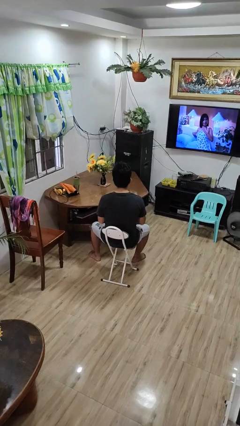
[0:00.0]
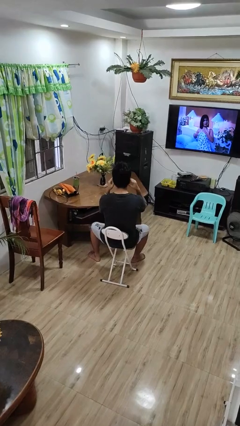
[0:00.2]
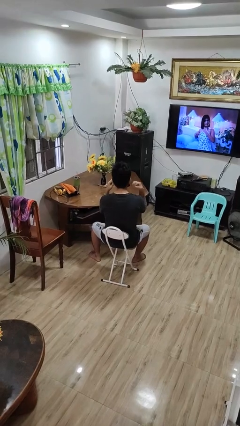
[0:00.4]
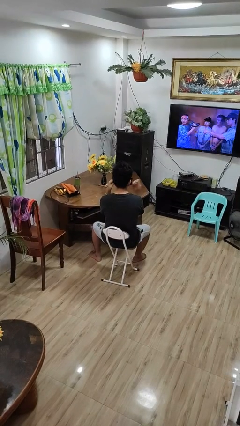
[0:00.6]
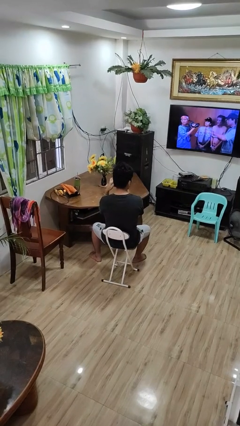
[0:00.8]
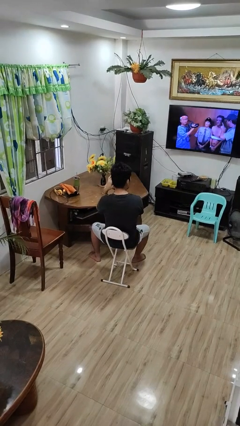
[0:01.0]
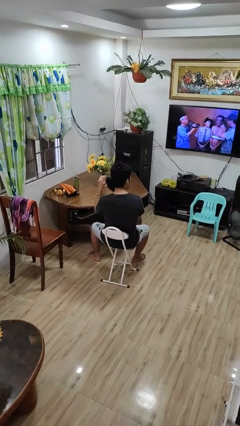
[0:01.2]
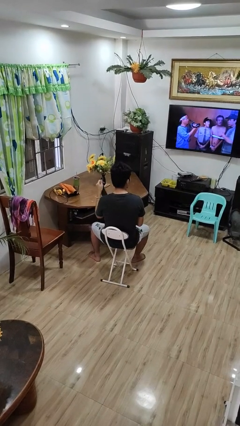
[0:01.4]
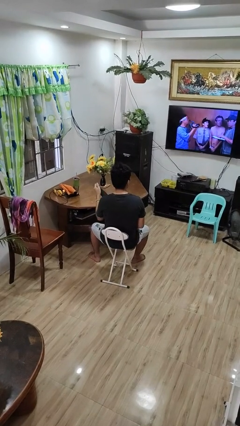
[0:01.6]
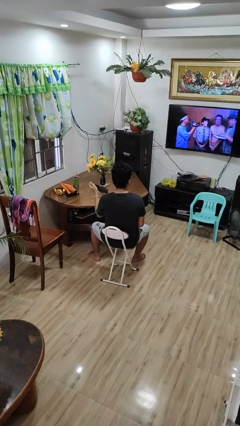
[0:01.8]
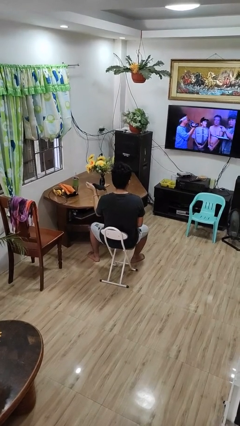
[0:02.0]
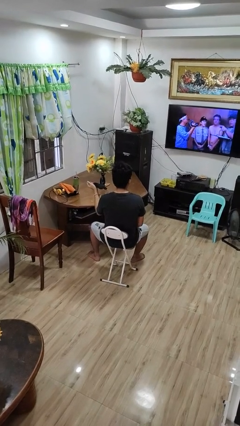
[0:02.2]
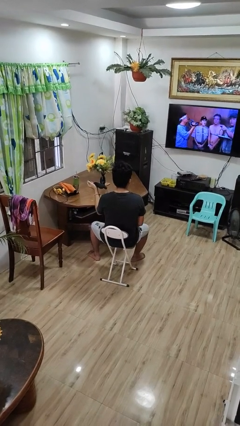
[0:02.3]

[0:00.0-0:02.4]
person takes off facemask

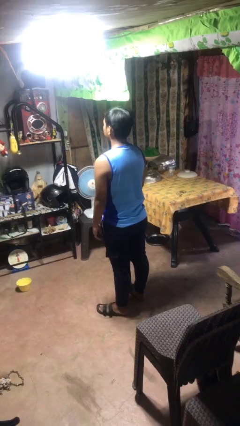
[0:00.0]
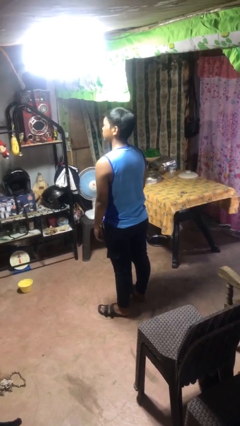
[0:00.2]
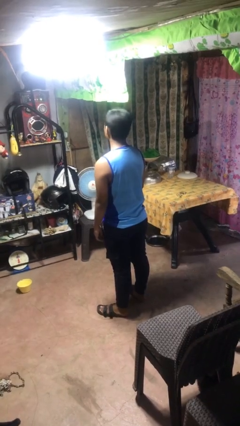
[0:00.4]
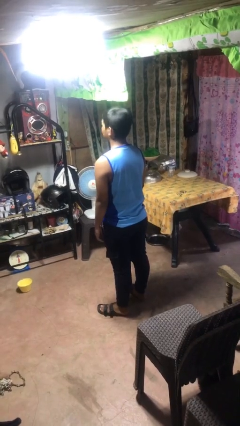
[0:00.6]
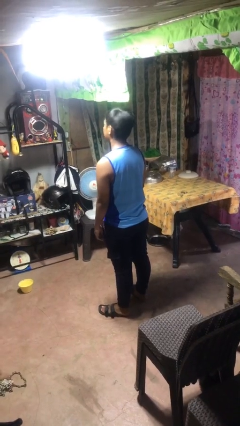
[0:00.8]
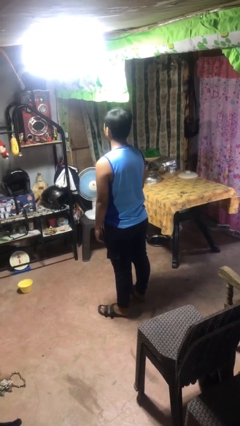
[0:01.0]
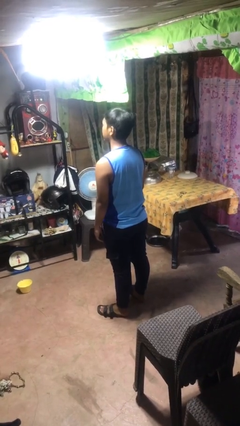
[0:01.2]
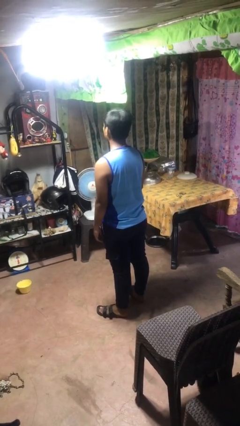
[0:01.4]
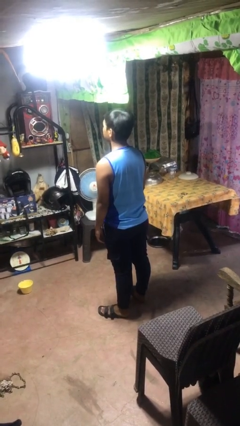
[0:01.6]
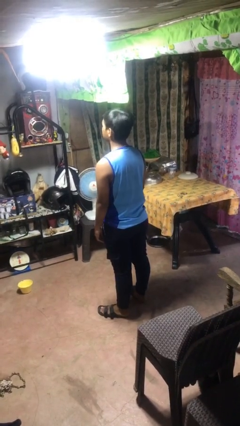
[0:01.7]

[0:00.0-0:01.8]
person shakes head

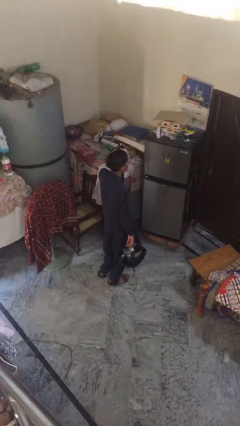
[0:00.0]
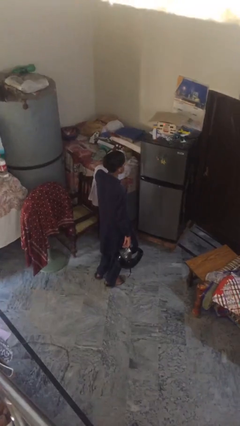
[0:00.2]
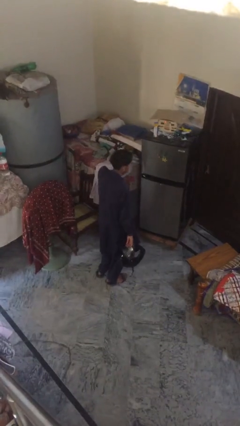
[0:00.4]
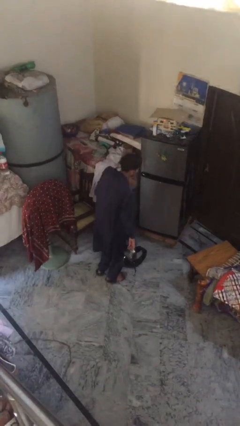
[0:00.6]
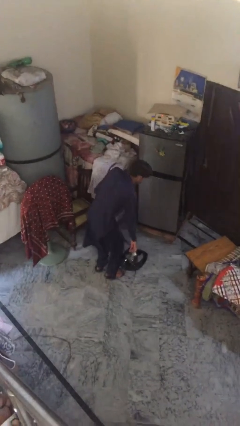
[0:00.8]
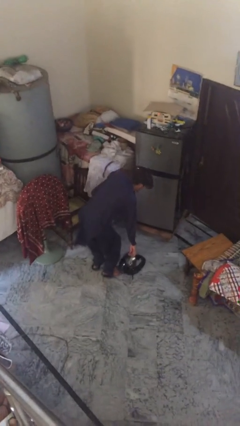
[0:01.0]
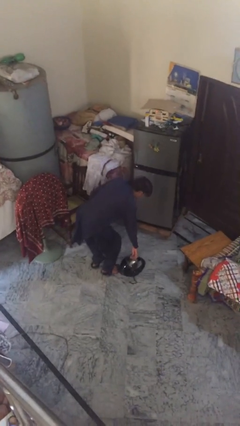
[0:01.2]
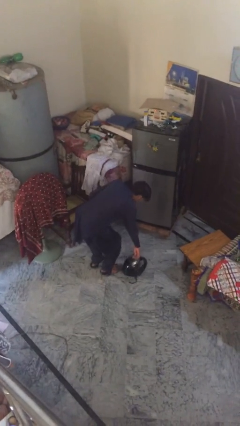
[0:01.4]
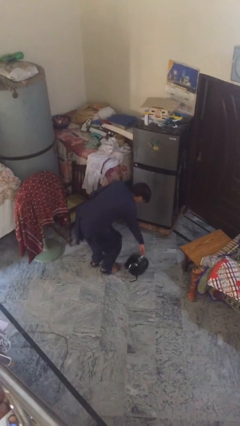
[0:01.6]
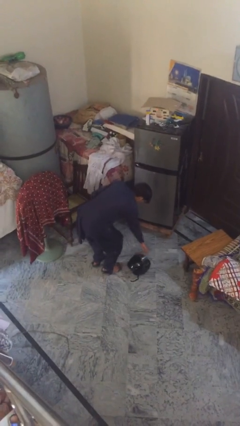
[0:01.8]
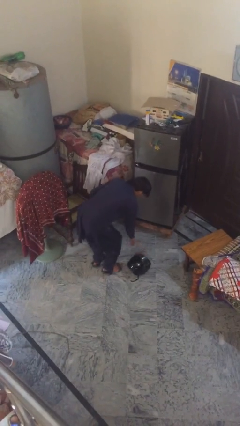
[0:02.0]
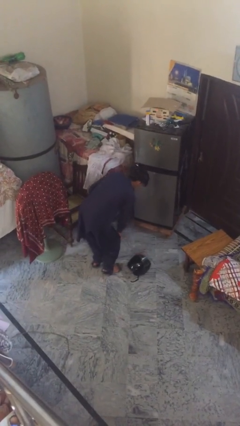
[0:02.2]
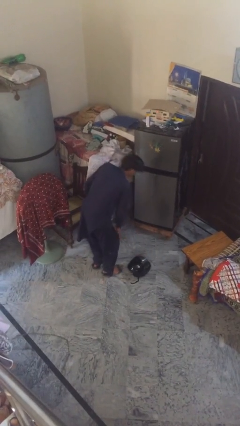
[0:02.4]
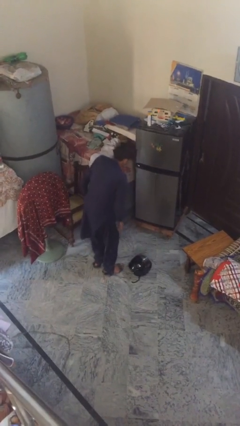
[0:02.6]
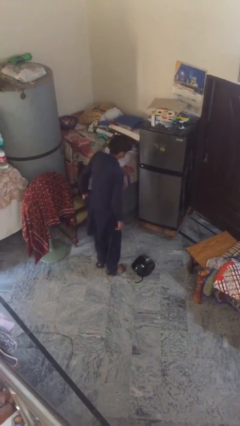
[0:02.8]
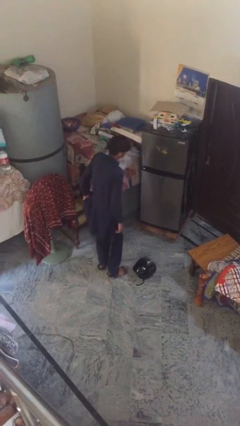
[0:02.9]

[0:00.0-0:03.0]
person puts down object on floor

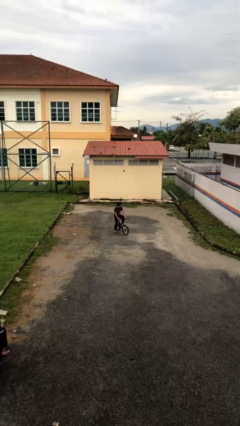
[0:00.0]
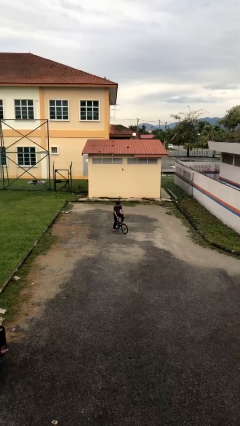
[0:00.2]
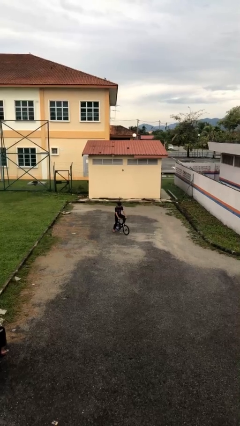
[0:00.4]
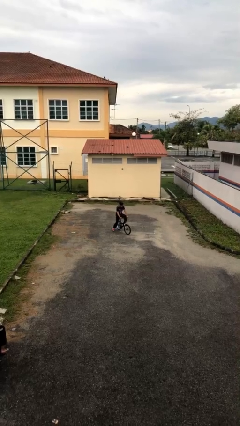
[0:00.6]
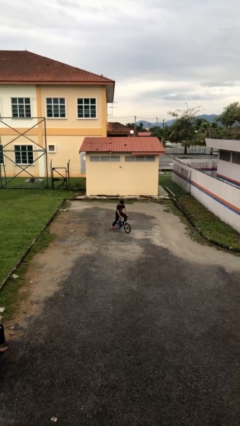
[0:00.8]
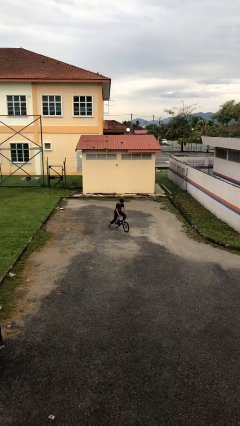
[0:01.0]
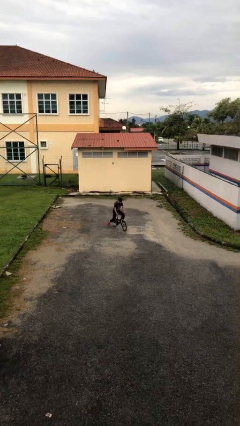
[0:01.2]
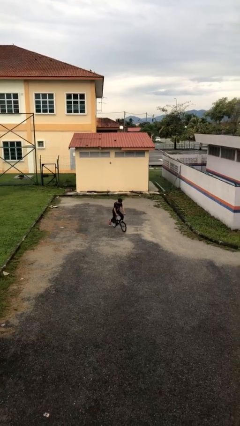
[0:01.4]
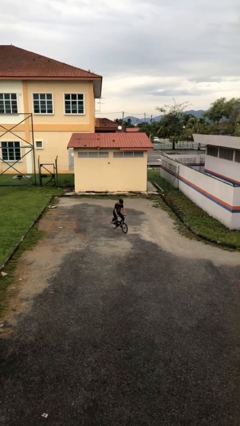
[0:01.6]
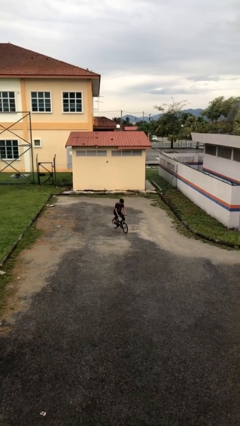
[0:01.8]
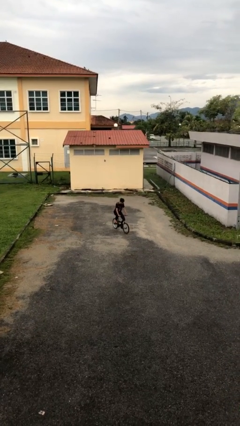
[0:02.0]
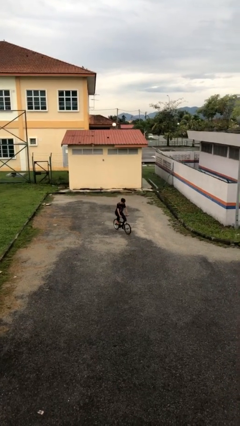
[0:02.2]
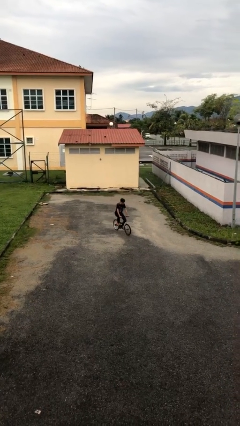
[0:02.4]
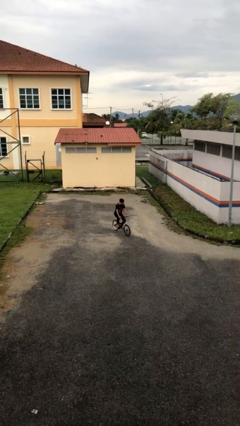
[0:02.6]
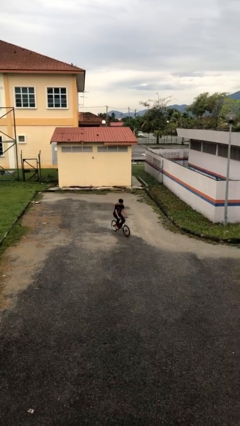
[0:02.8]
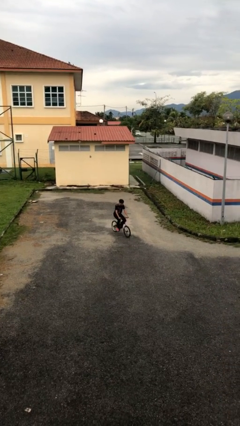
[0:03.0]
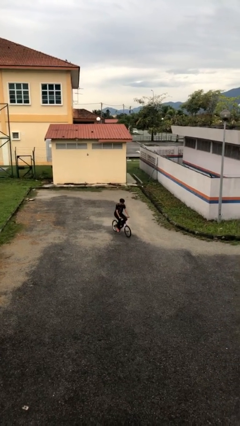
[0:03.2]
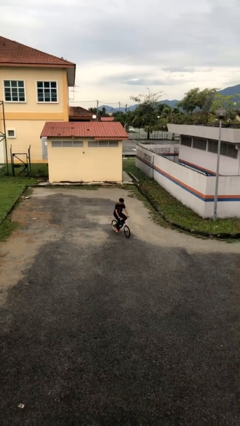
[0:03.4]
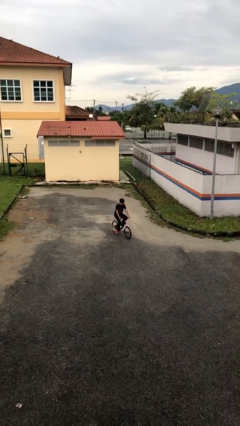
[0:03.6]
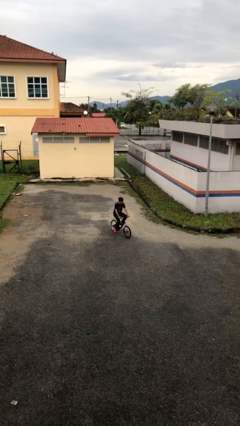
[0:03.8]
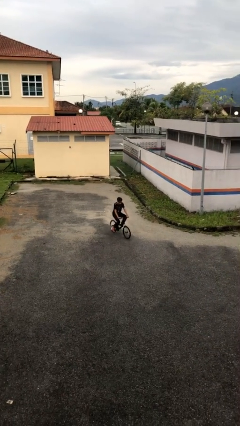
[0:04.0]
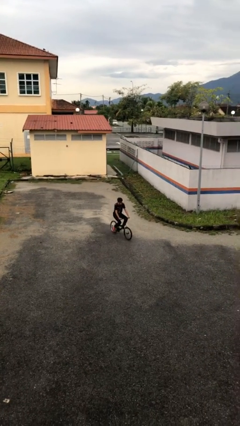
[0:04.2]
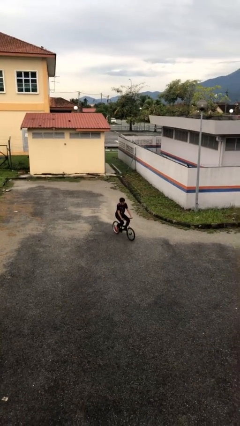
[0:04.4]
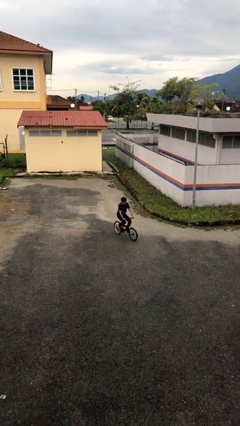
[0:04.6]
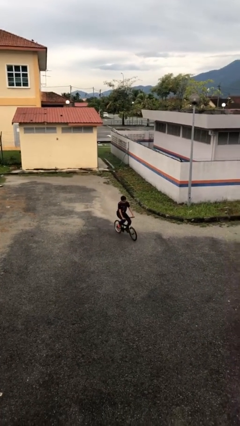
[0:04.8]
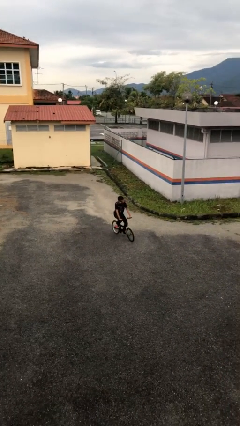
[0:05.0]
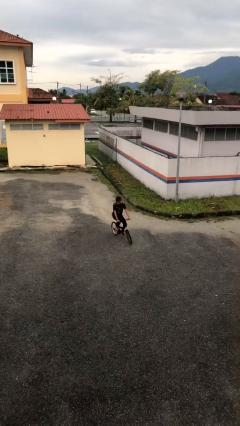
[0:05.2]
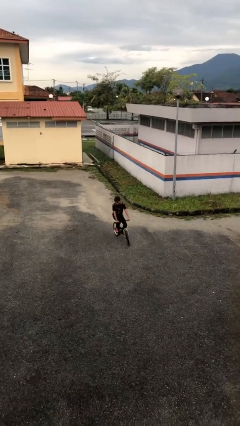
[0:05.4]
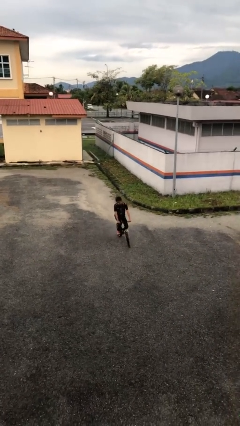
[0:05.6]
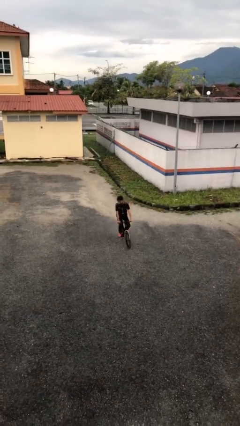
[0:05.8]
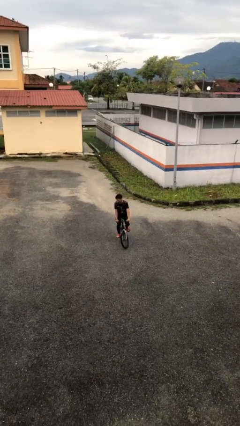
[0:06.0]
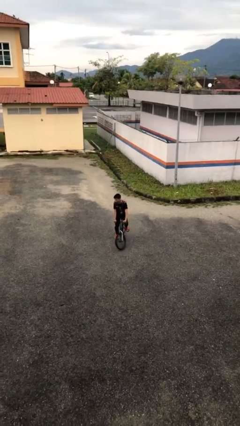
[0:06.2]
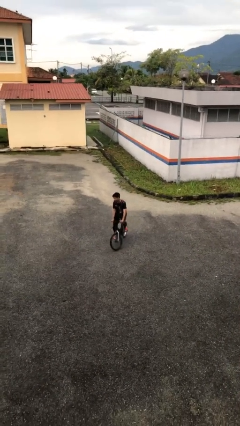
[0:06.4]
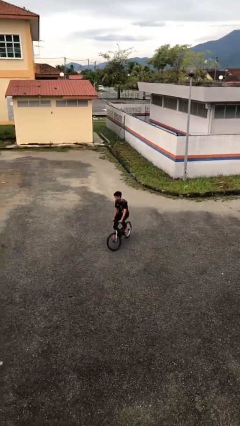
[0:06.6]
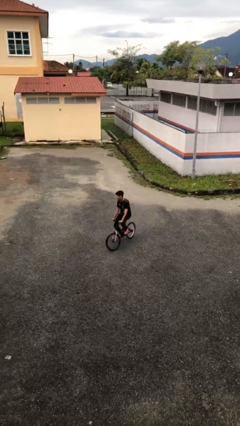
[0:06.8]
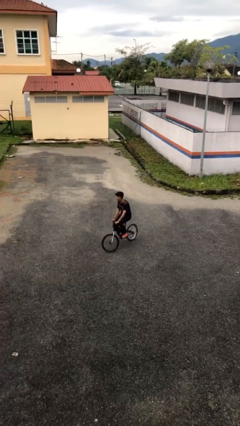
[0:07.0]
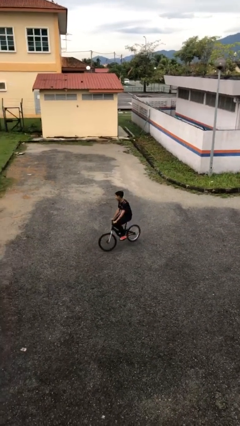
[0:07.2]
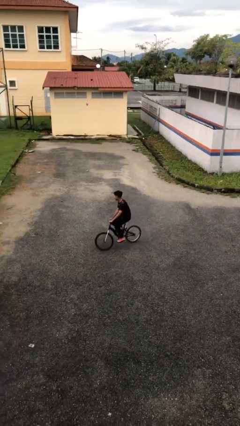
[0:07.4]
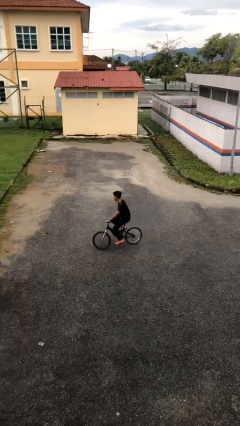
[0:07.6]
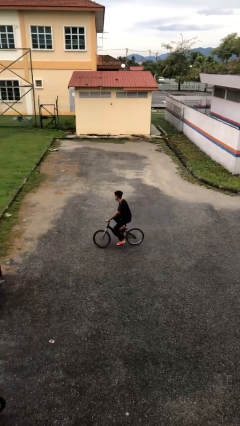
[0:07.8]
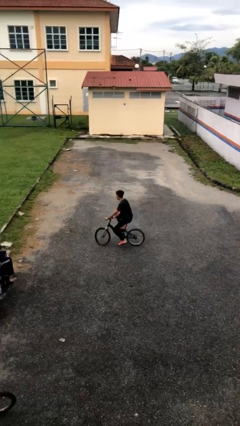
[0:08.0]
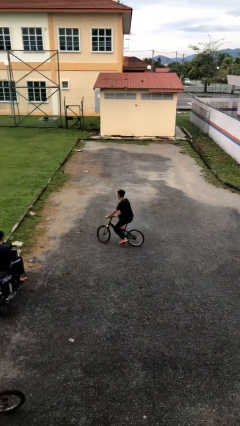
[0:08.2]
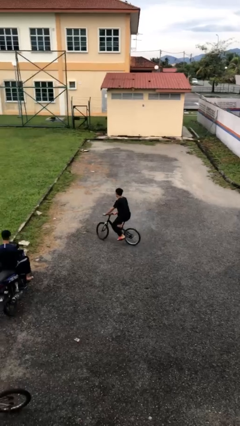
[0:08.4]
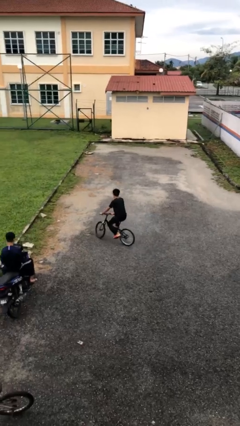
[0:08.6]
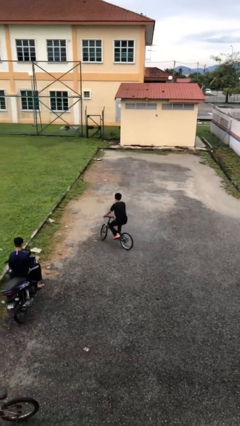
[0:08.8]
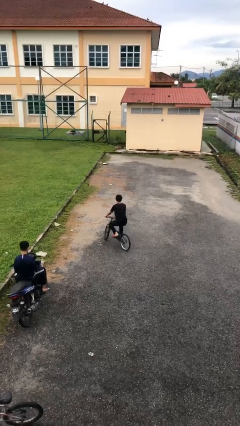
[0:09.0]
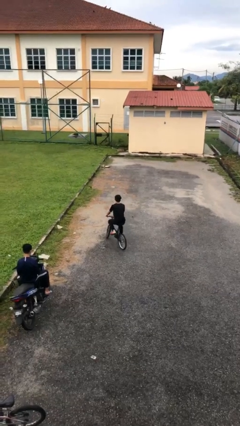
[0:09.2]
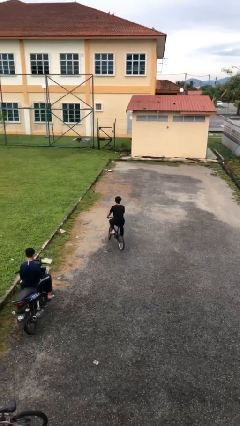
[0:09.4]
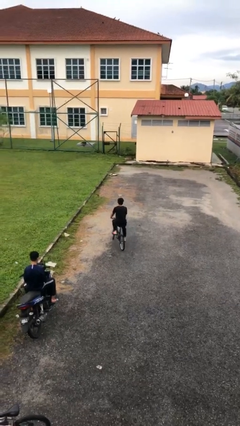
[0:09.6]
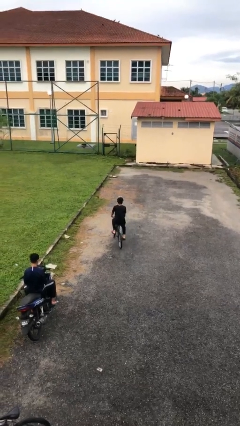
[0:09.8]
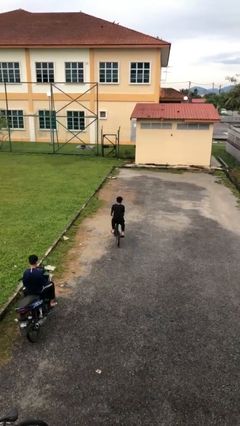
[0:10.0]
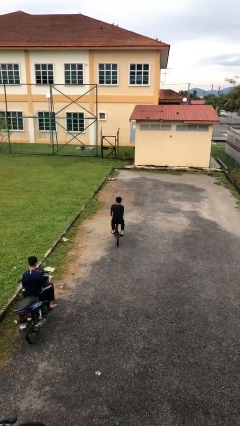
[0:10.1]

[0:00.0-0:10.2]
person rides bicycle

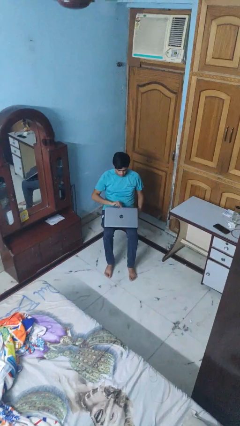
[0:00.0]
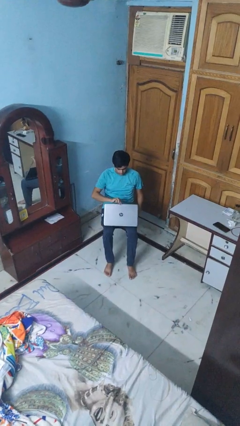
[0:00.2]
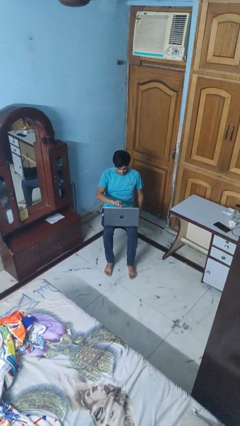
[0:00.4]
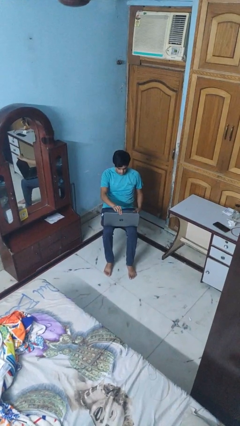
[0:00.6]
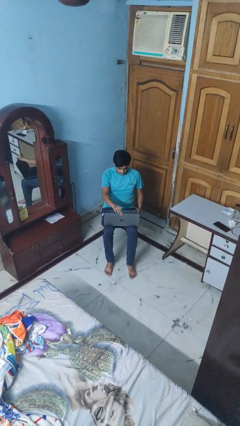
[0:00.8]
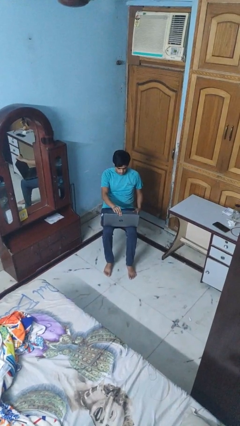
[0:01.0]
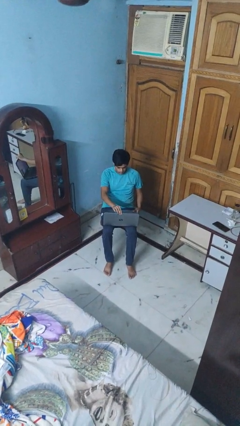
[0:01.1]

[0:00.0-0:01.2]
person opens laptop
